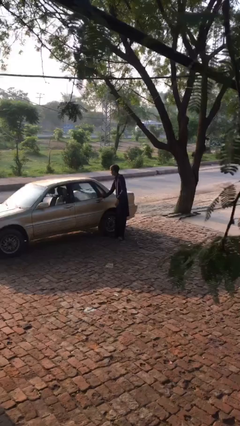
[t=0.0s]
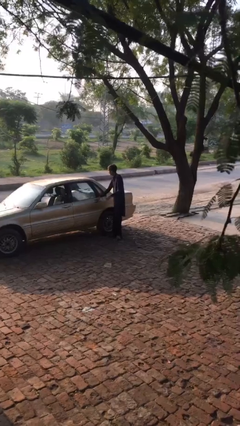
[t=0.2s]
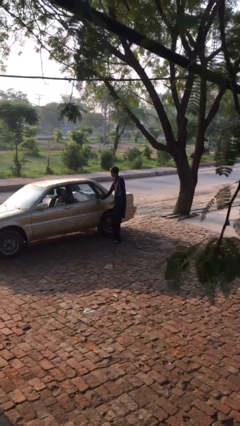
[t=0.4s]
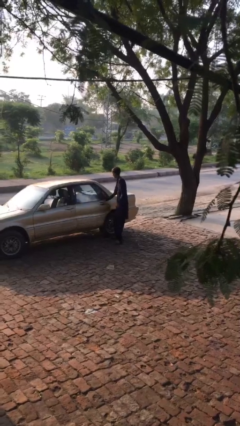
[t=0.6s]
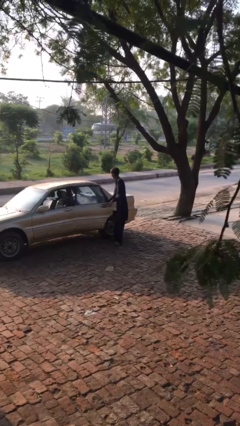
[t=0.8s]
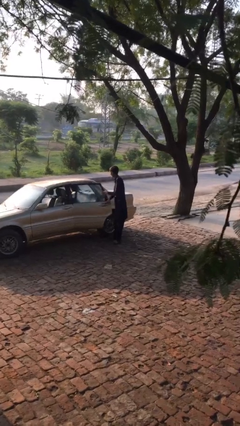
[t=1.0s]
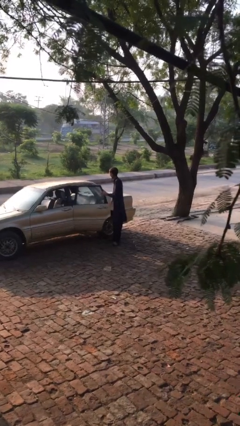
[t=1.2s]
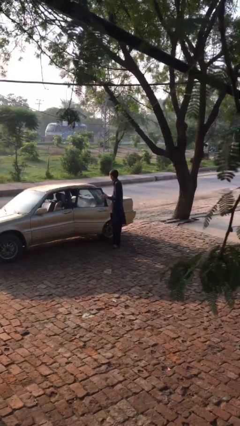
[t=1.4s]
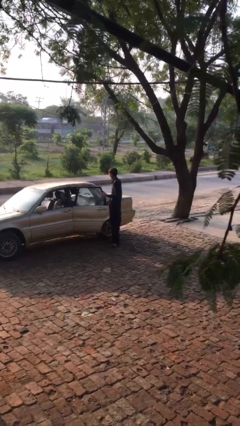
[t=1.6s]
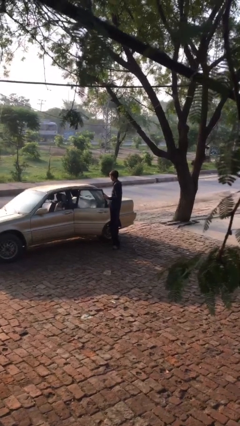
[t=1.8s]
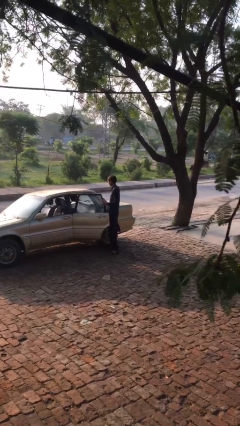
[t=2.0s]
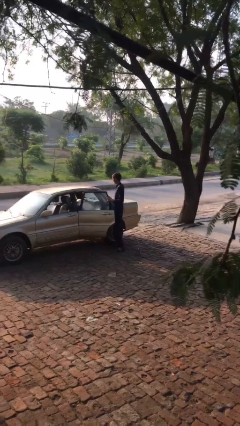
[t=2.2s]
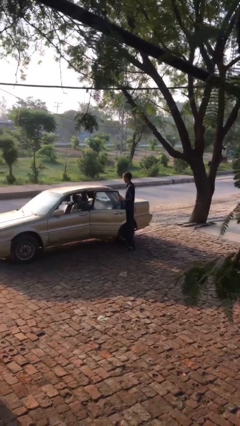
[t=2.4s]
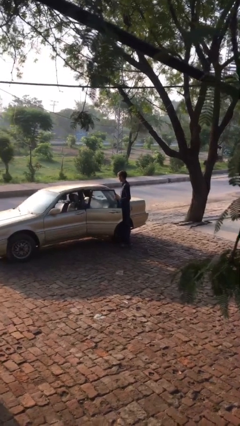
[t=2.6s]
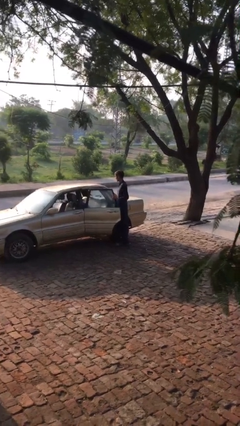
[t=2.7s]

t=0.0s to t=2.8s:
person opens car door

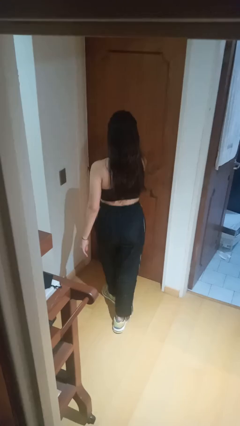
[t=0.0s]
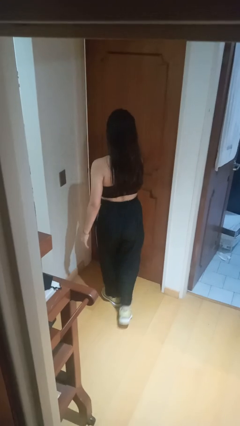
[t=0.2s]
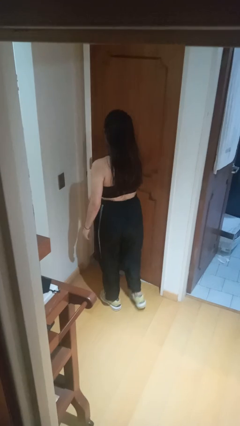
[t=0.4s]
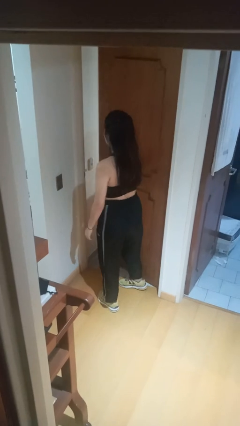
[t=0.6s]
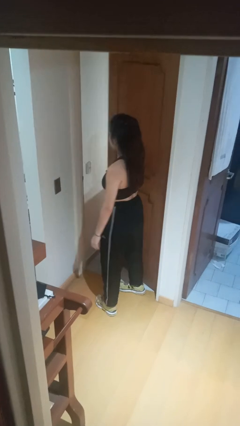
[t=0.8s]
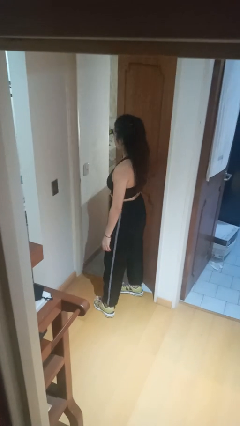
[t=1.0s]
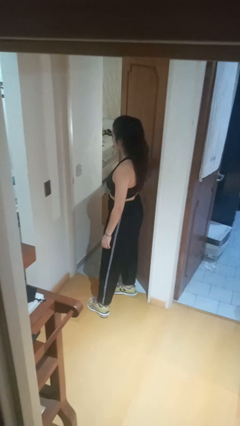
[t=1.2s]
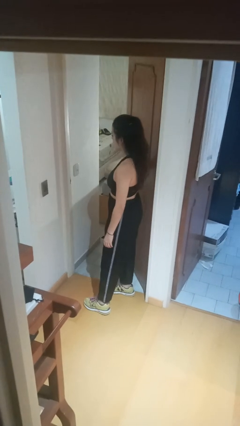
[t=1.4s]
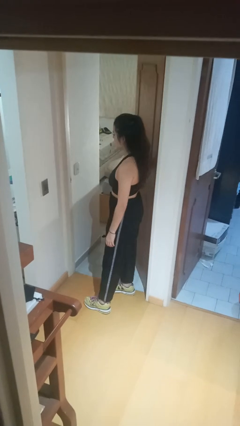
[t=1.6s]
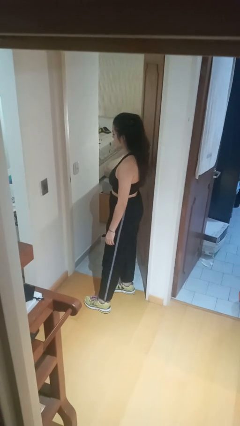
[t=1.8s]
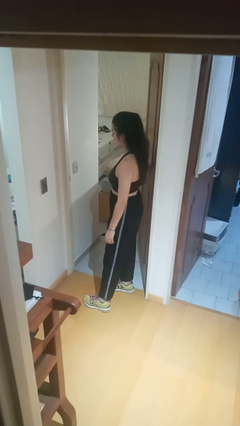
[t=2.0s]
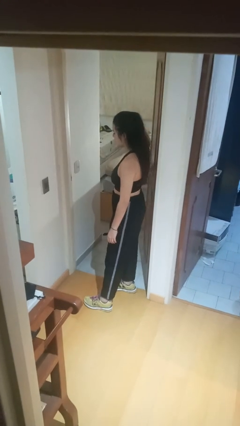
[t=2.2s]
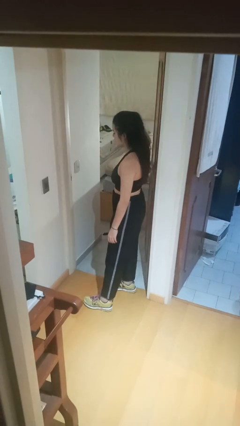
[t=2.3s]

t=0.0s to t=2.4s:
person opens facility door

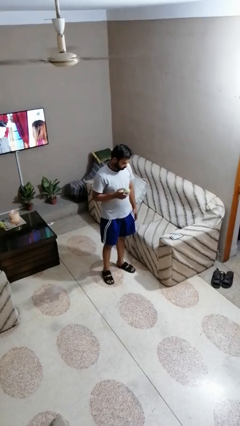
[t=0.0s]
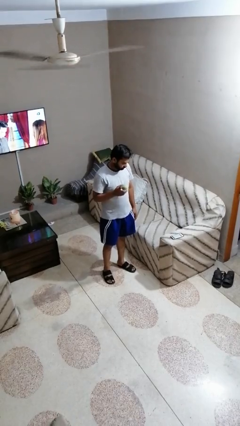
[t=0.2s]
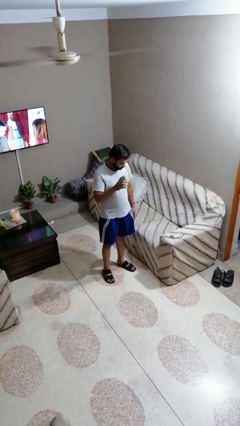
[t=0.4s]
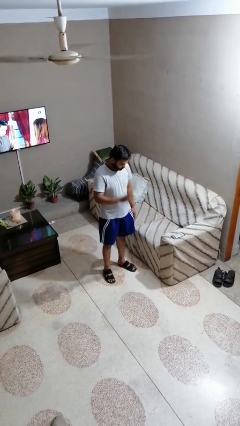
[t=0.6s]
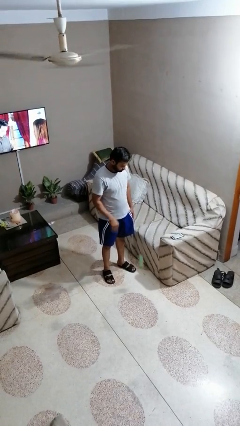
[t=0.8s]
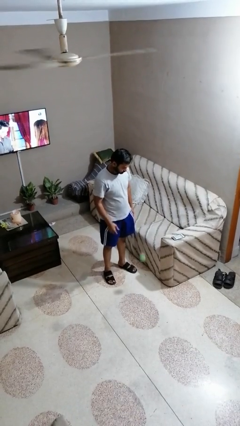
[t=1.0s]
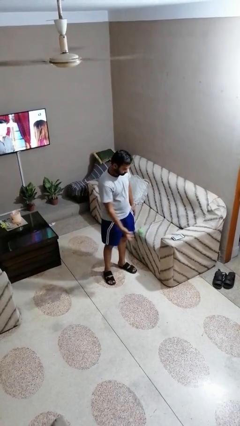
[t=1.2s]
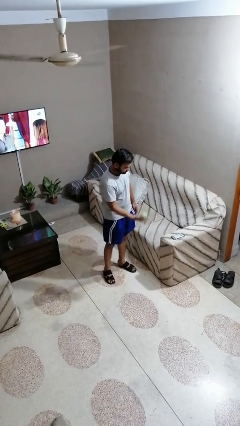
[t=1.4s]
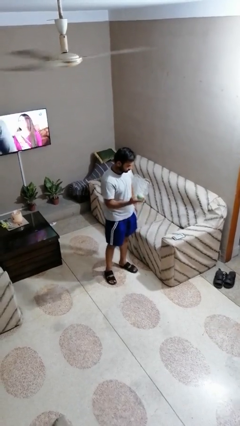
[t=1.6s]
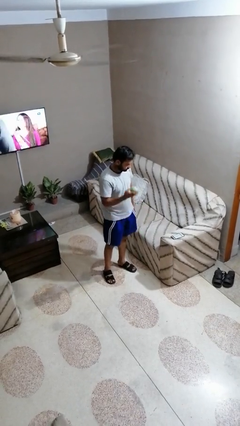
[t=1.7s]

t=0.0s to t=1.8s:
person bounces ball on floor

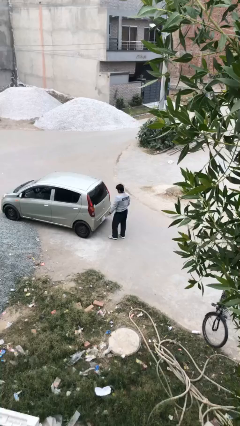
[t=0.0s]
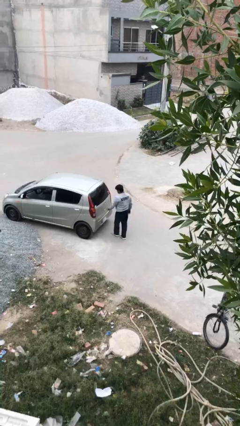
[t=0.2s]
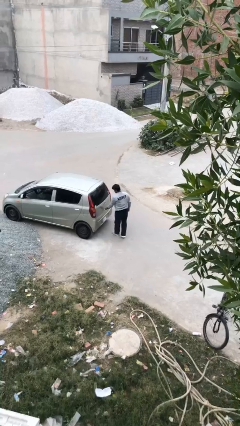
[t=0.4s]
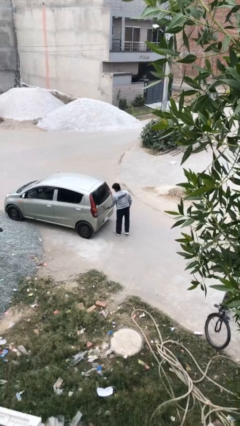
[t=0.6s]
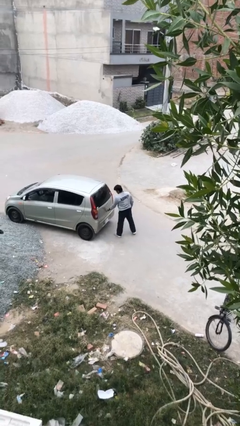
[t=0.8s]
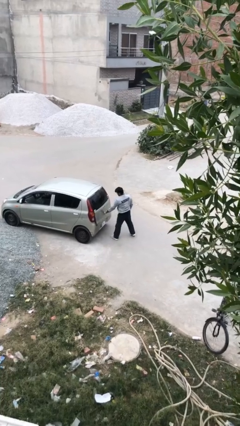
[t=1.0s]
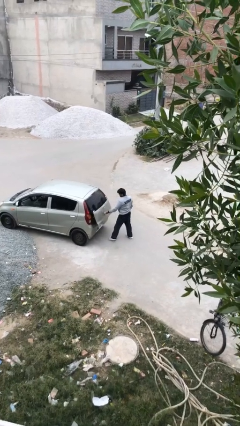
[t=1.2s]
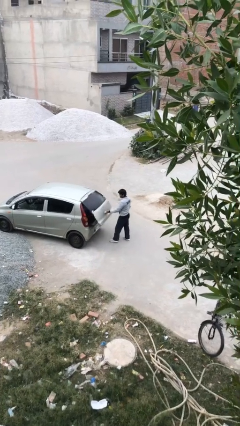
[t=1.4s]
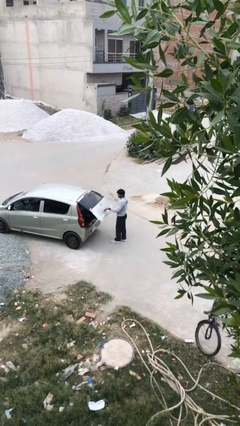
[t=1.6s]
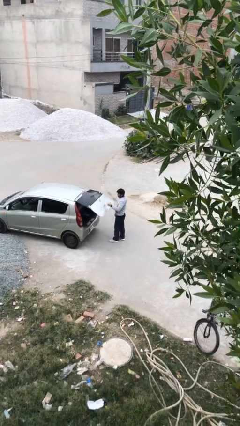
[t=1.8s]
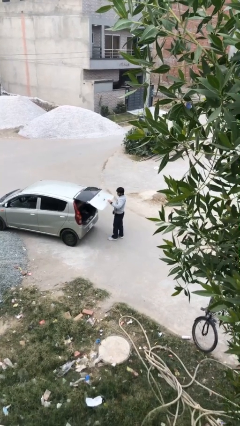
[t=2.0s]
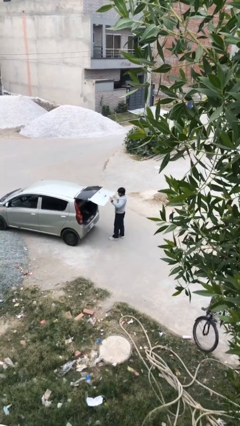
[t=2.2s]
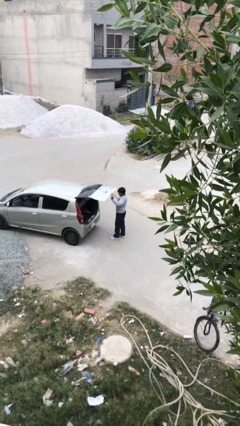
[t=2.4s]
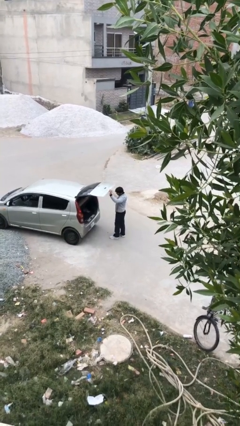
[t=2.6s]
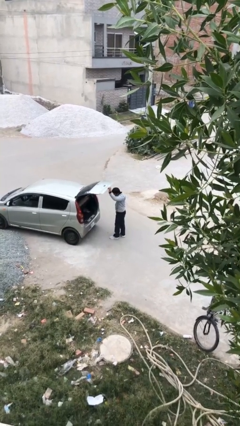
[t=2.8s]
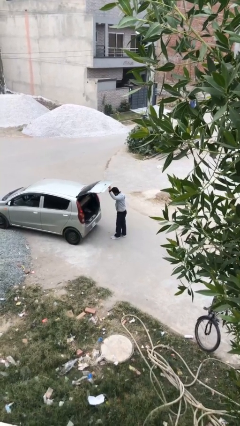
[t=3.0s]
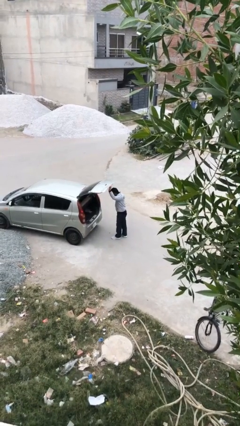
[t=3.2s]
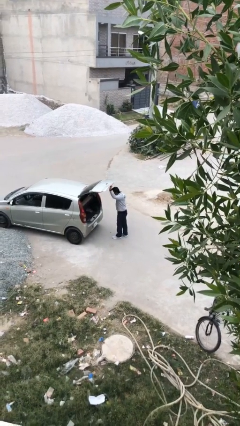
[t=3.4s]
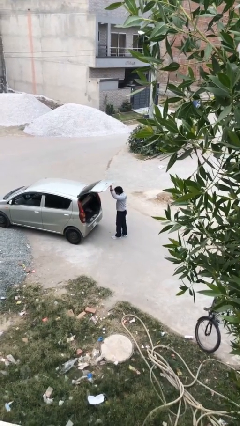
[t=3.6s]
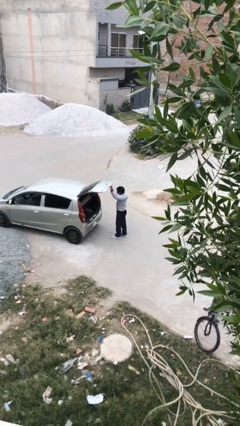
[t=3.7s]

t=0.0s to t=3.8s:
person opens car trunk

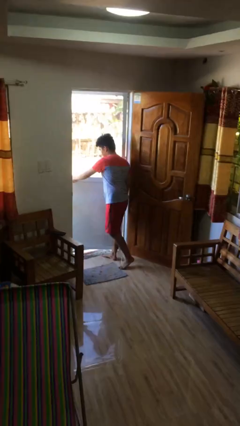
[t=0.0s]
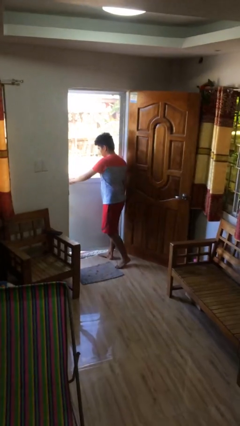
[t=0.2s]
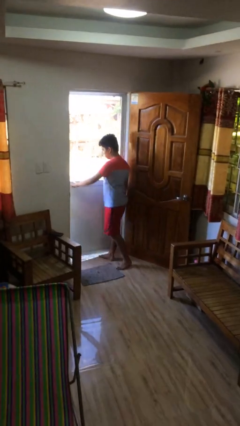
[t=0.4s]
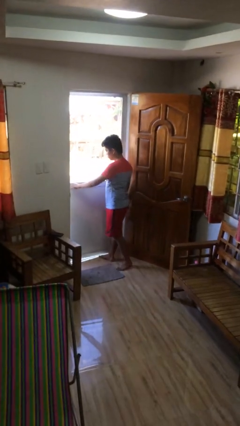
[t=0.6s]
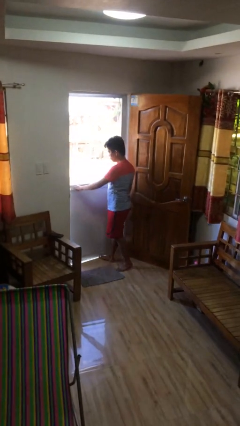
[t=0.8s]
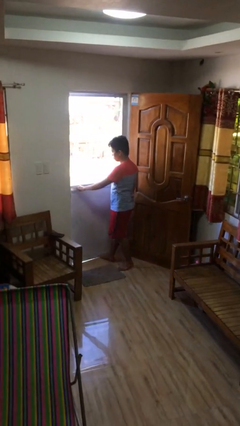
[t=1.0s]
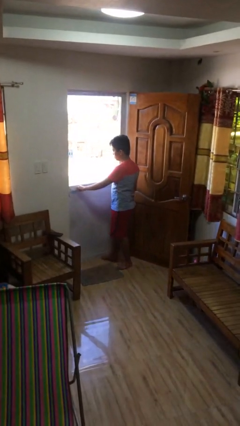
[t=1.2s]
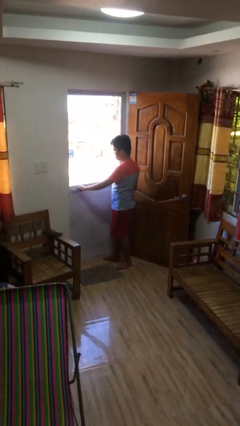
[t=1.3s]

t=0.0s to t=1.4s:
person closes facility door

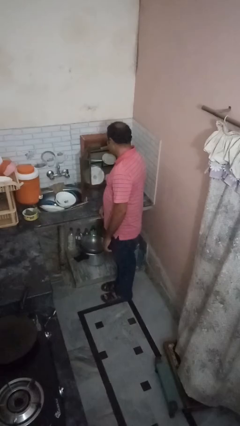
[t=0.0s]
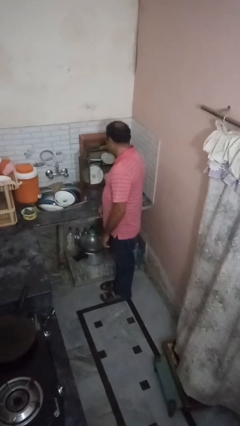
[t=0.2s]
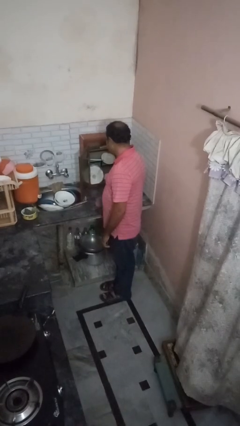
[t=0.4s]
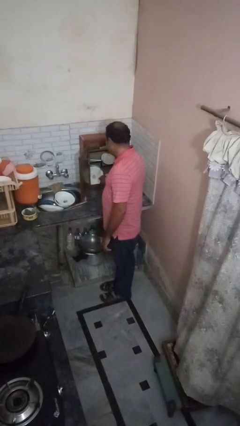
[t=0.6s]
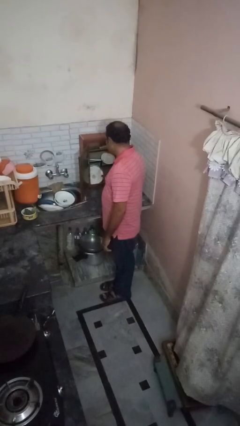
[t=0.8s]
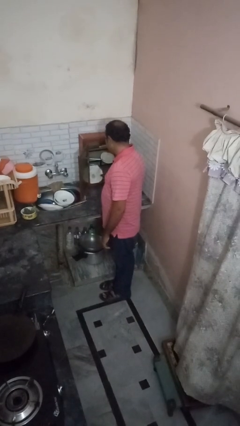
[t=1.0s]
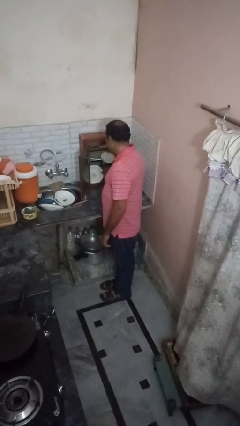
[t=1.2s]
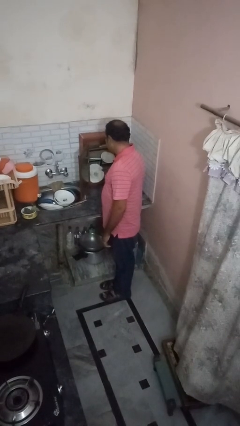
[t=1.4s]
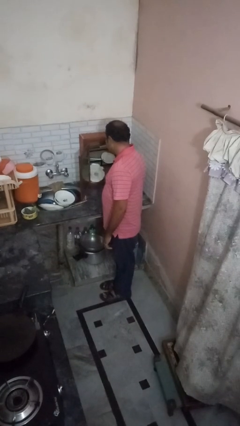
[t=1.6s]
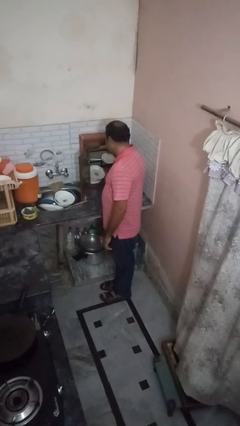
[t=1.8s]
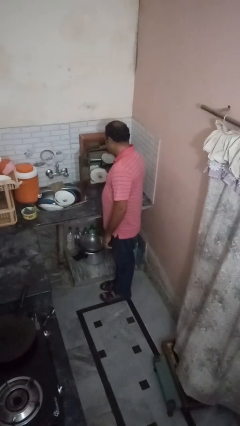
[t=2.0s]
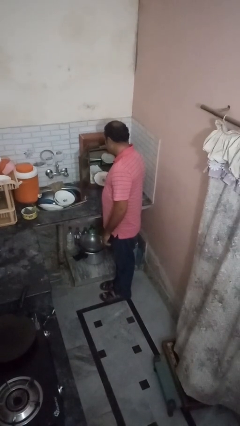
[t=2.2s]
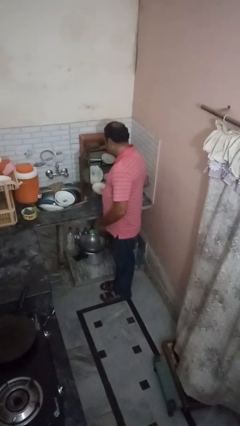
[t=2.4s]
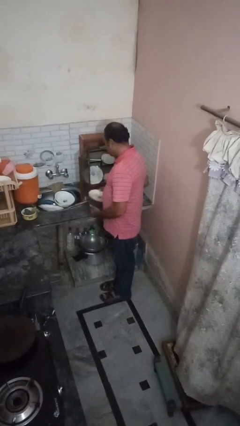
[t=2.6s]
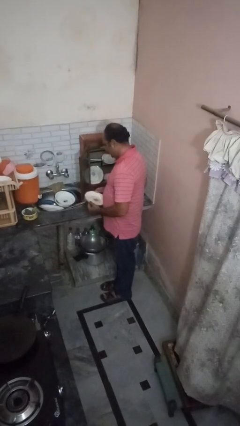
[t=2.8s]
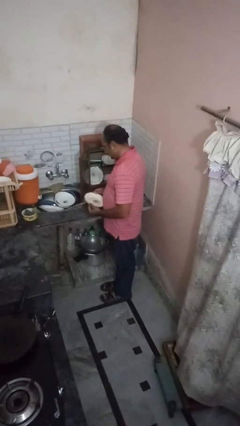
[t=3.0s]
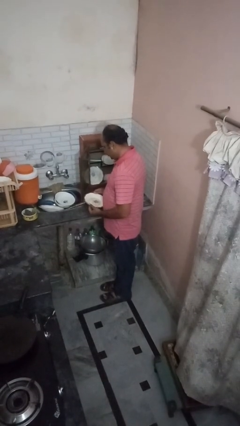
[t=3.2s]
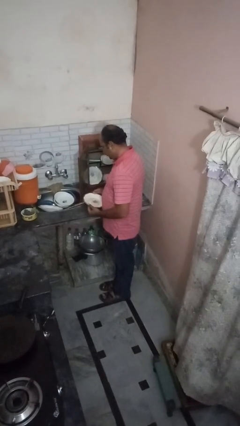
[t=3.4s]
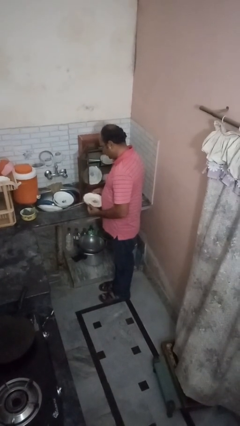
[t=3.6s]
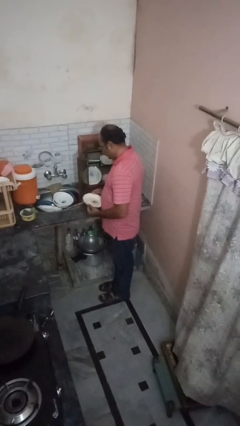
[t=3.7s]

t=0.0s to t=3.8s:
person puts object in cabinet

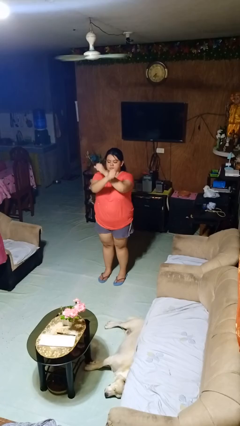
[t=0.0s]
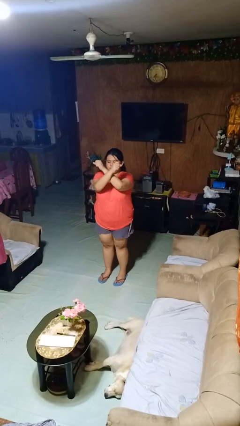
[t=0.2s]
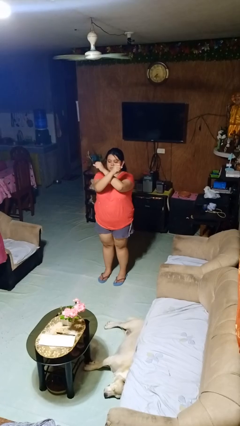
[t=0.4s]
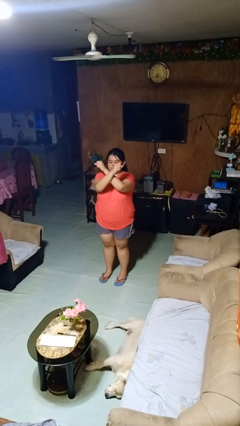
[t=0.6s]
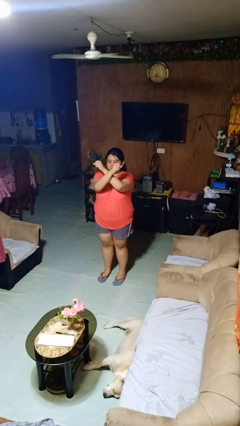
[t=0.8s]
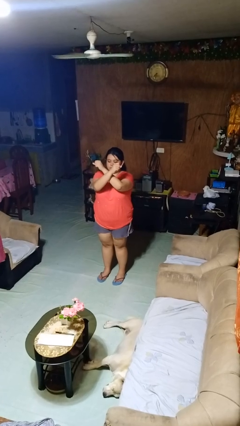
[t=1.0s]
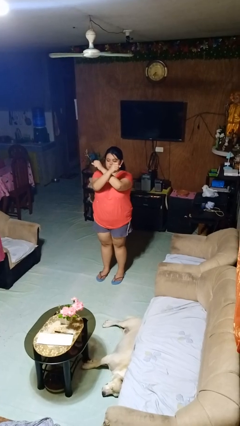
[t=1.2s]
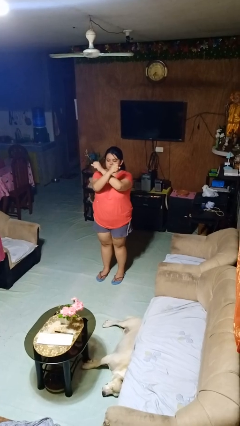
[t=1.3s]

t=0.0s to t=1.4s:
person gestures arms x
